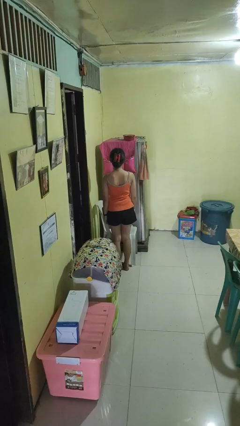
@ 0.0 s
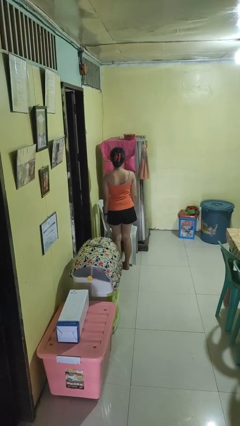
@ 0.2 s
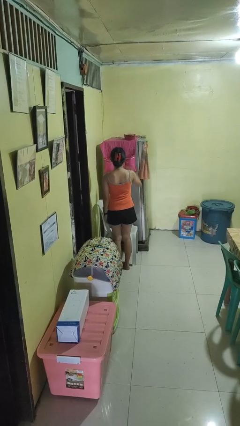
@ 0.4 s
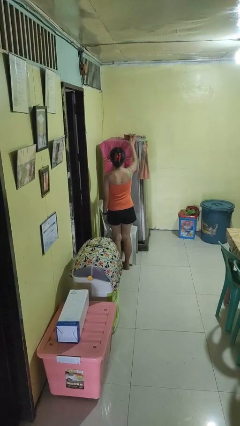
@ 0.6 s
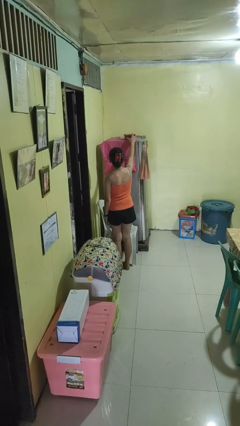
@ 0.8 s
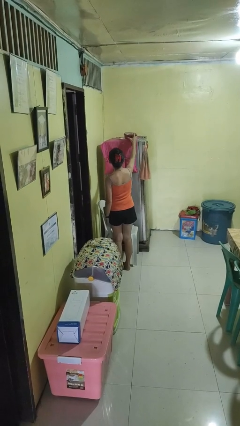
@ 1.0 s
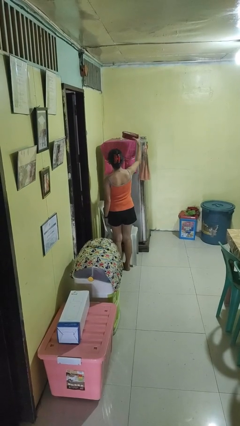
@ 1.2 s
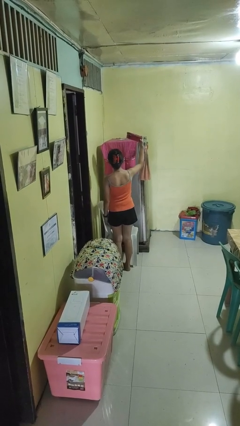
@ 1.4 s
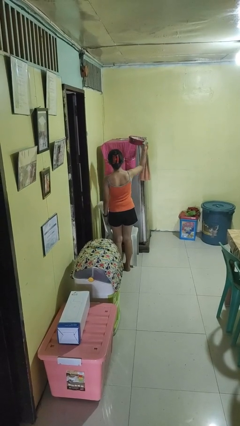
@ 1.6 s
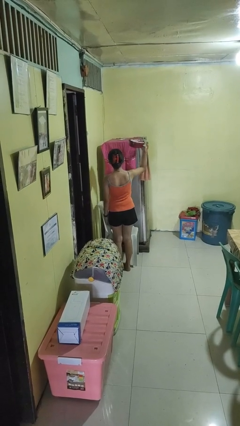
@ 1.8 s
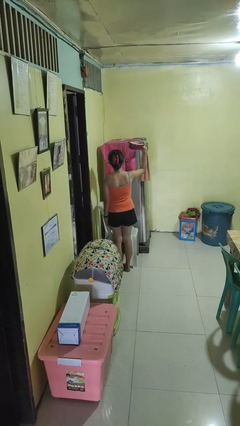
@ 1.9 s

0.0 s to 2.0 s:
person picks up object from shelf

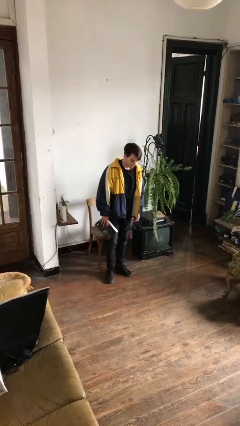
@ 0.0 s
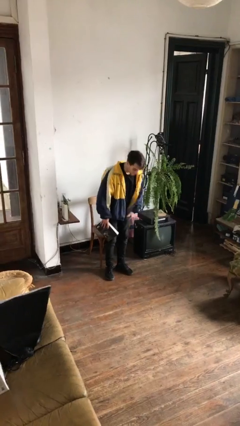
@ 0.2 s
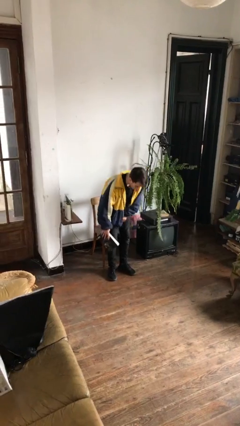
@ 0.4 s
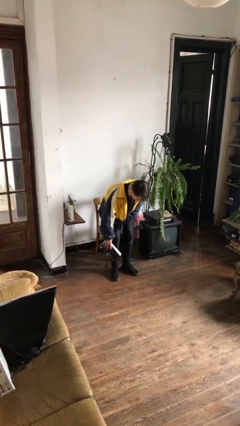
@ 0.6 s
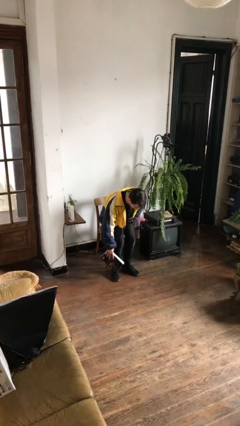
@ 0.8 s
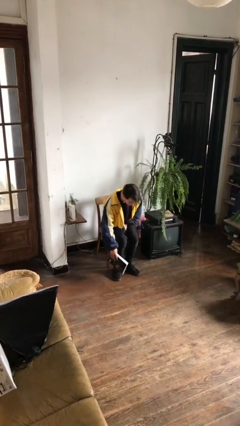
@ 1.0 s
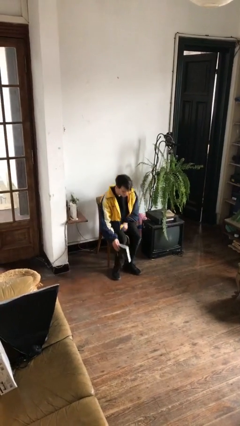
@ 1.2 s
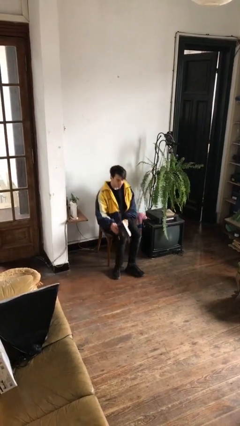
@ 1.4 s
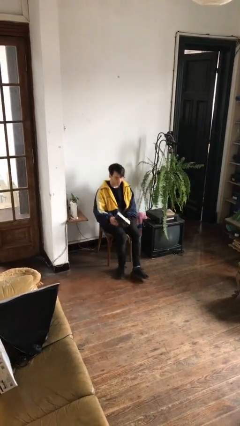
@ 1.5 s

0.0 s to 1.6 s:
person sits down

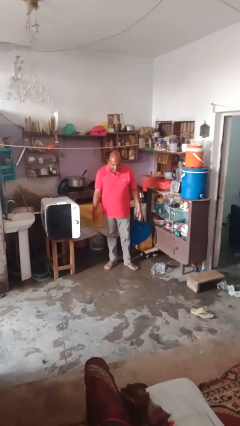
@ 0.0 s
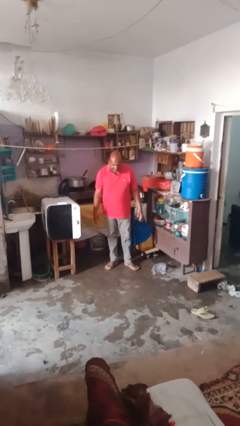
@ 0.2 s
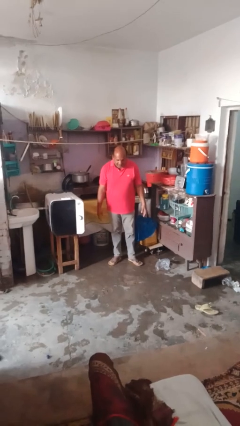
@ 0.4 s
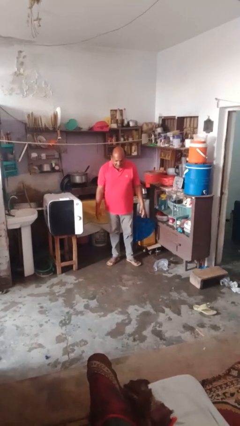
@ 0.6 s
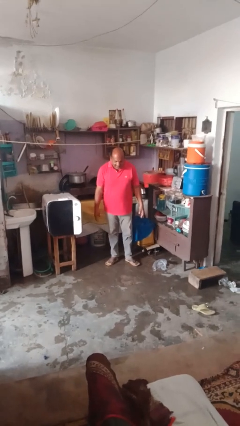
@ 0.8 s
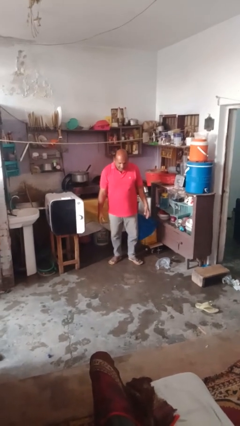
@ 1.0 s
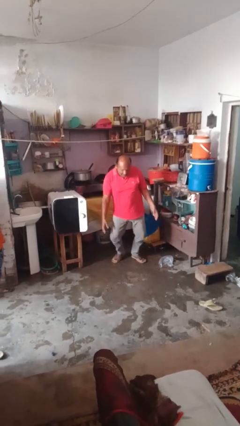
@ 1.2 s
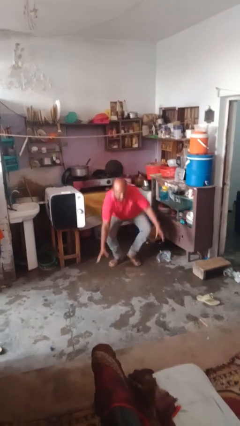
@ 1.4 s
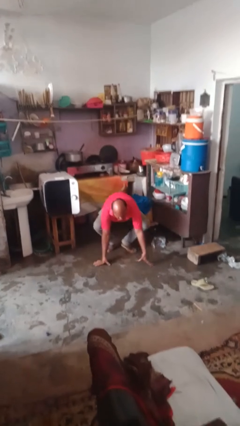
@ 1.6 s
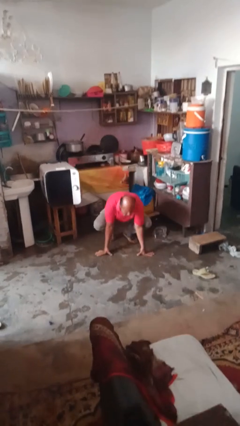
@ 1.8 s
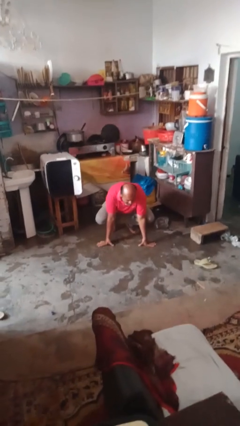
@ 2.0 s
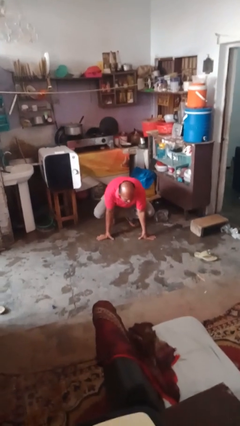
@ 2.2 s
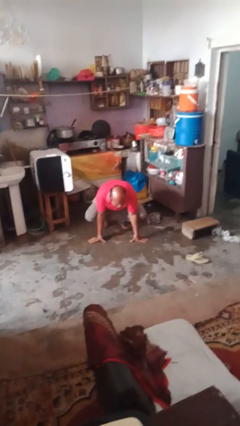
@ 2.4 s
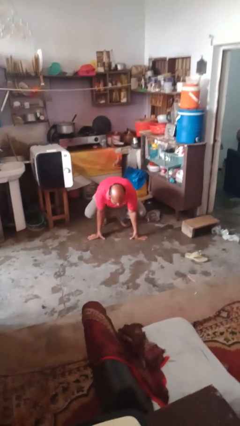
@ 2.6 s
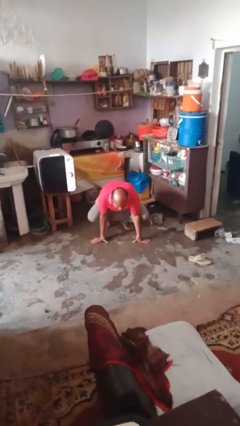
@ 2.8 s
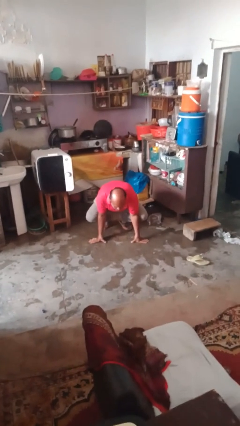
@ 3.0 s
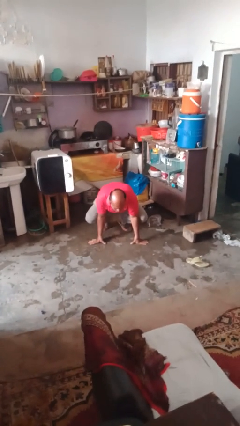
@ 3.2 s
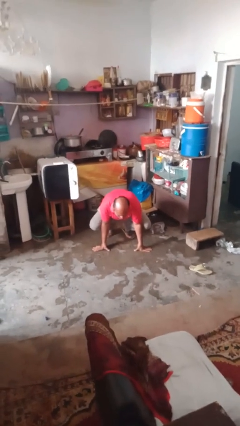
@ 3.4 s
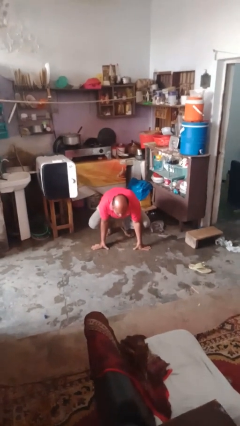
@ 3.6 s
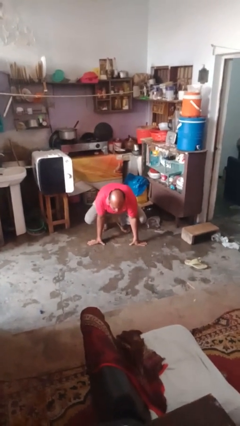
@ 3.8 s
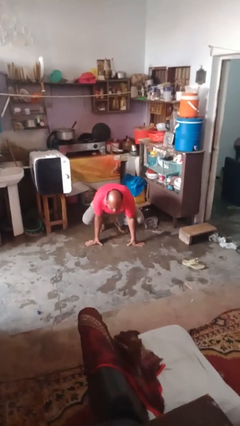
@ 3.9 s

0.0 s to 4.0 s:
person falls while standing

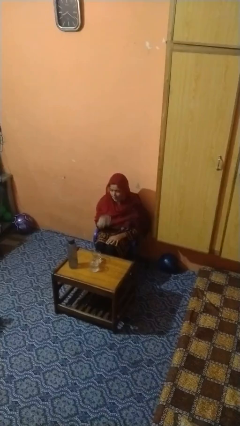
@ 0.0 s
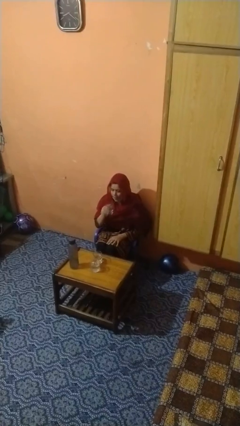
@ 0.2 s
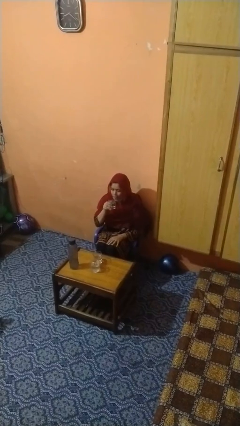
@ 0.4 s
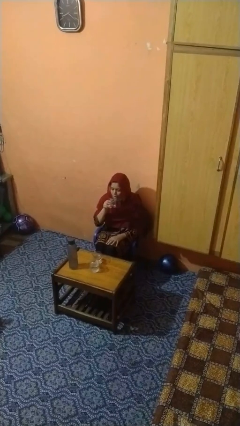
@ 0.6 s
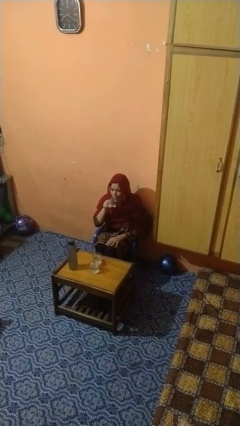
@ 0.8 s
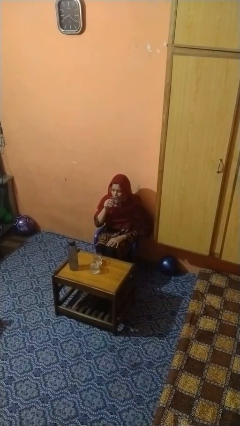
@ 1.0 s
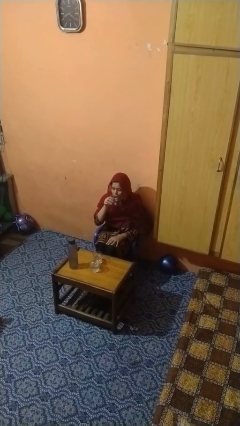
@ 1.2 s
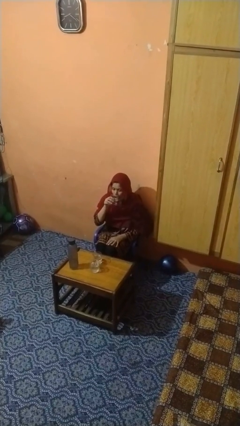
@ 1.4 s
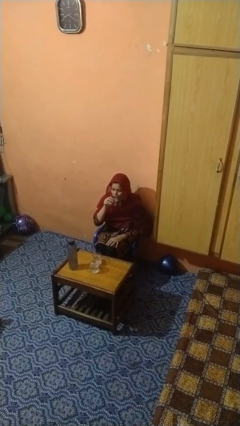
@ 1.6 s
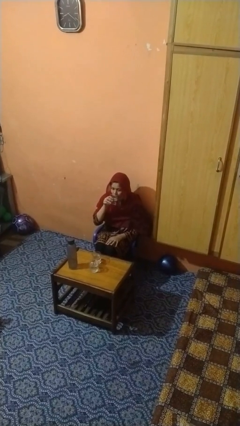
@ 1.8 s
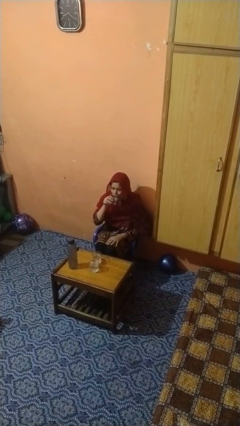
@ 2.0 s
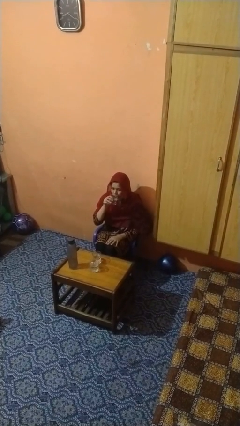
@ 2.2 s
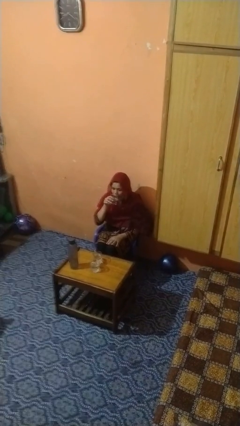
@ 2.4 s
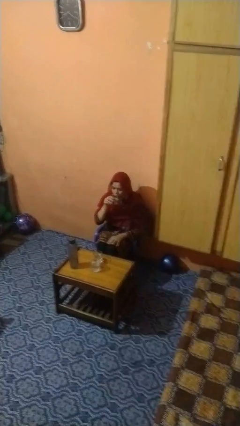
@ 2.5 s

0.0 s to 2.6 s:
person drinks from shotglass

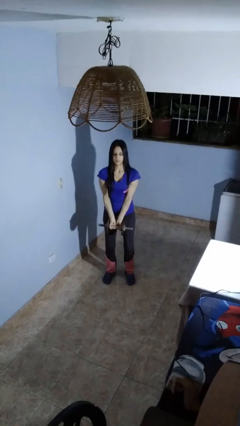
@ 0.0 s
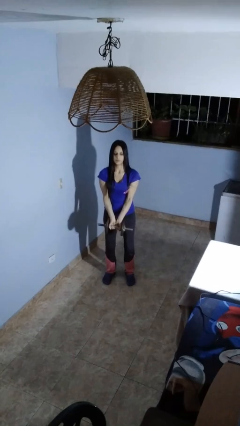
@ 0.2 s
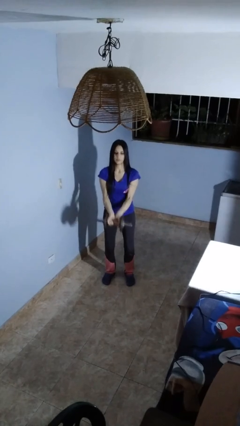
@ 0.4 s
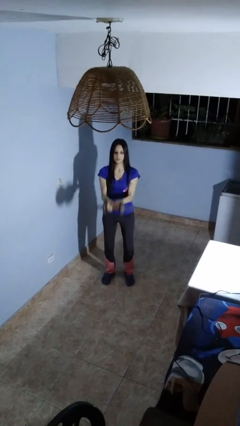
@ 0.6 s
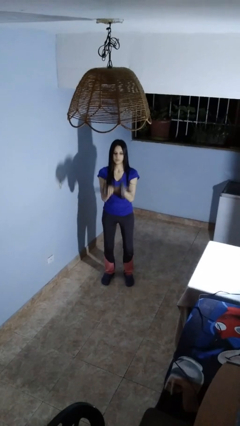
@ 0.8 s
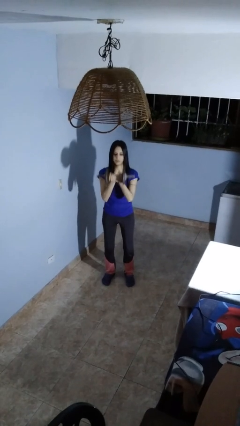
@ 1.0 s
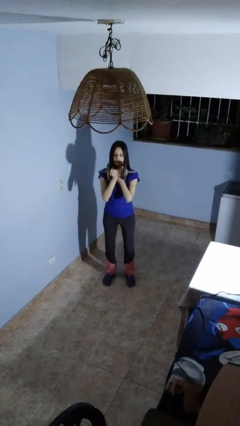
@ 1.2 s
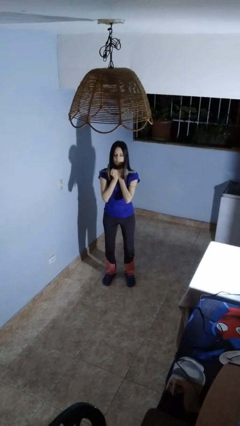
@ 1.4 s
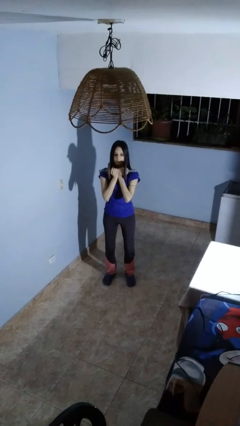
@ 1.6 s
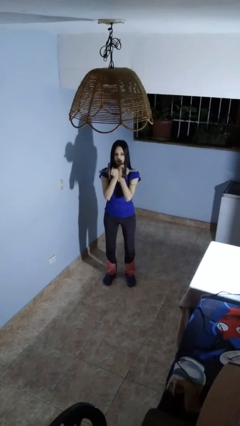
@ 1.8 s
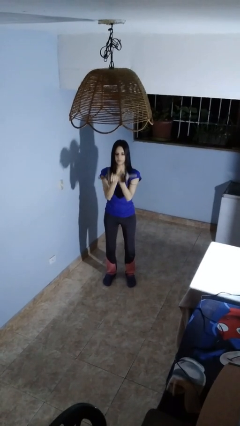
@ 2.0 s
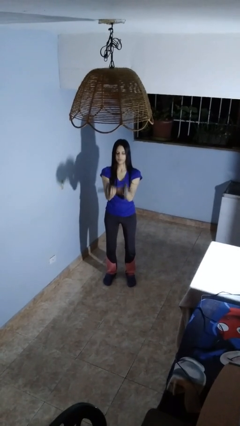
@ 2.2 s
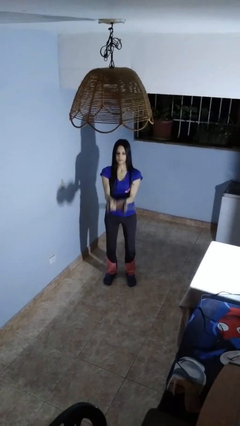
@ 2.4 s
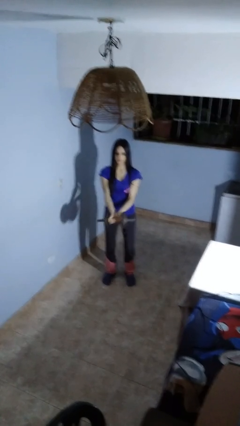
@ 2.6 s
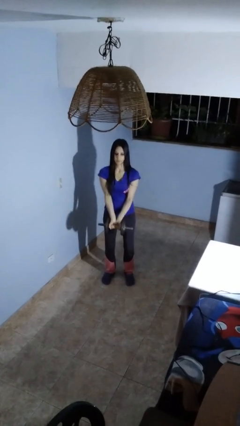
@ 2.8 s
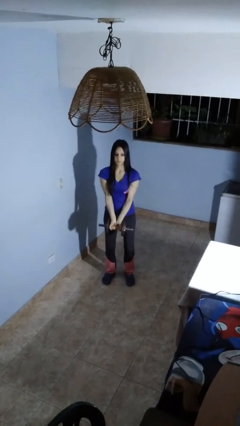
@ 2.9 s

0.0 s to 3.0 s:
person lifts dumbbells

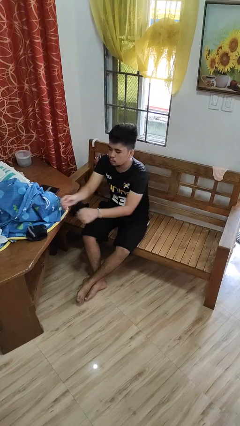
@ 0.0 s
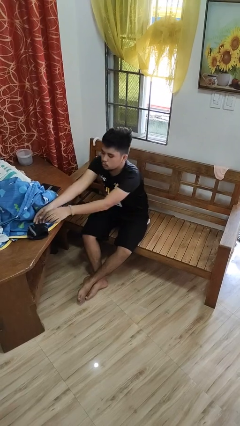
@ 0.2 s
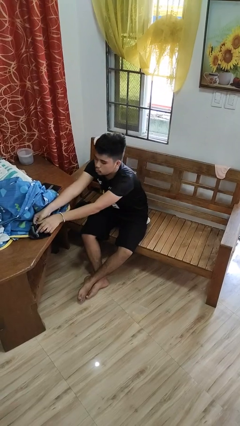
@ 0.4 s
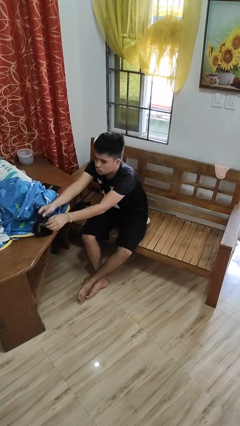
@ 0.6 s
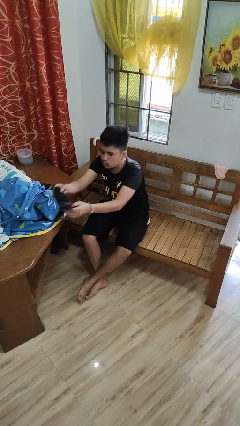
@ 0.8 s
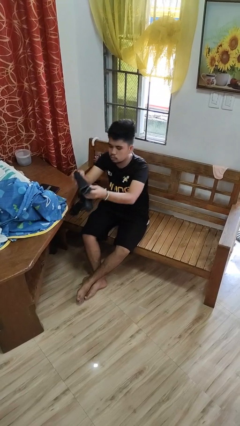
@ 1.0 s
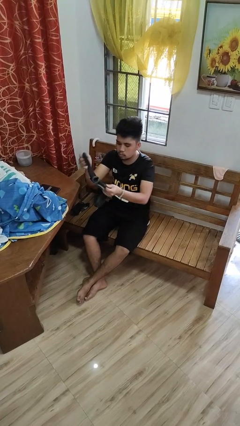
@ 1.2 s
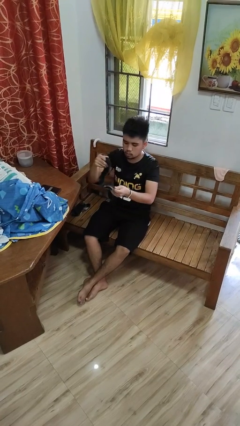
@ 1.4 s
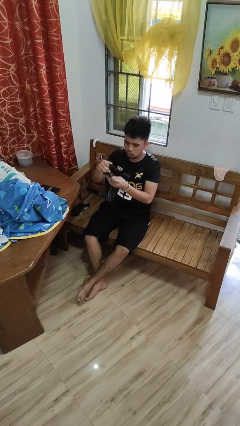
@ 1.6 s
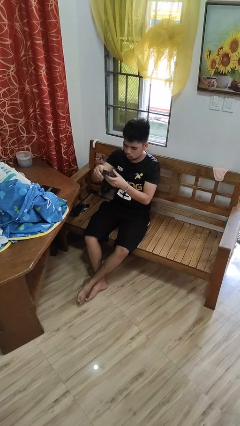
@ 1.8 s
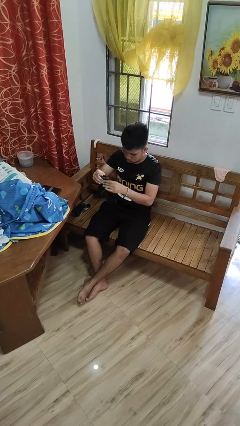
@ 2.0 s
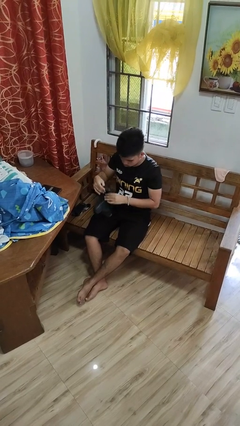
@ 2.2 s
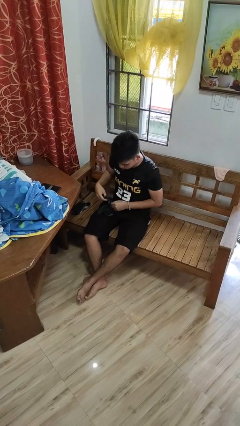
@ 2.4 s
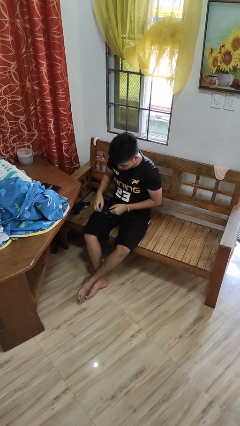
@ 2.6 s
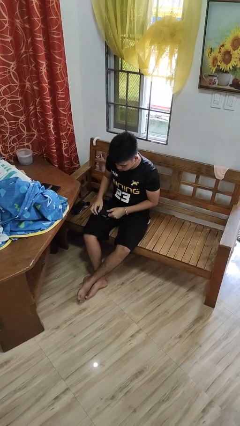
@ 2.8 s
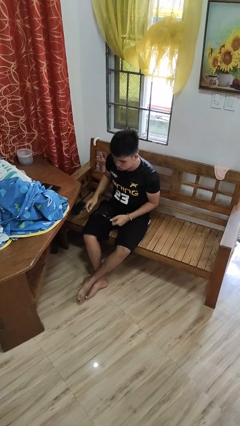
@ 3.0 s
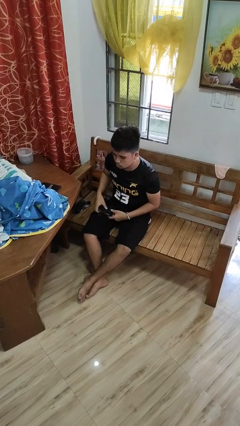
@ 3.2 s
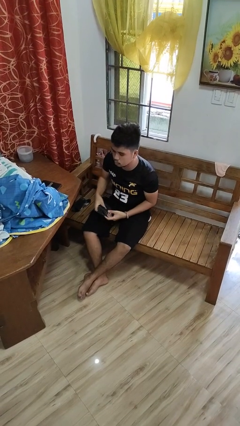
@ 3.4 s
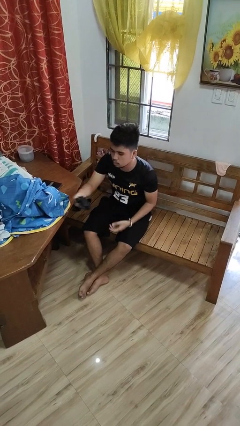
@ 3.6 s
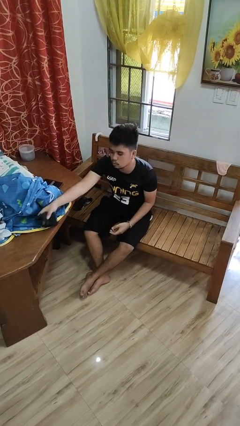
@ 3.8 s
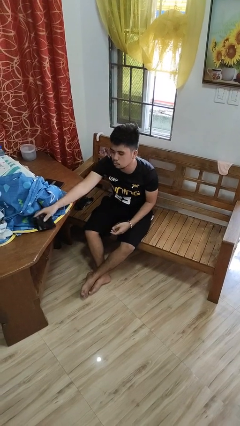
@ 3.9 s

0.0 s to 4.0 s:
person folds socks
